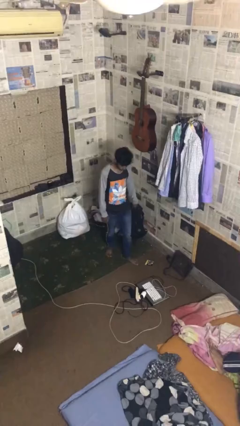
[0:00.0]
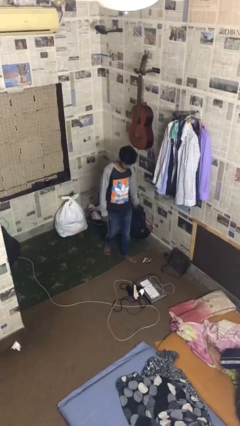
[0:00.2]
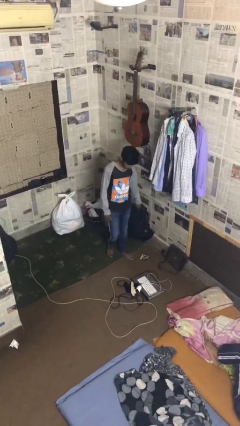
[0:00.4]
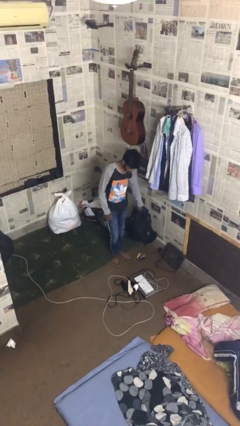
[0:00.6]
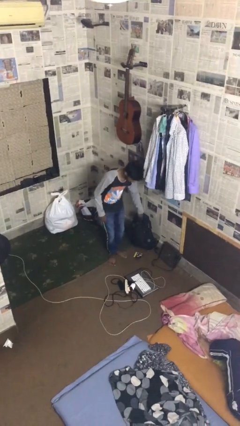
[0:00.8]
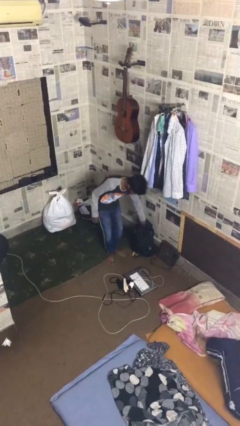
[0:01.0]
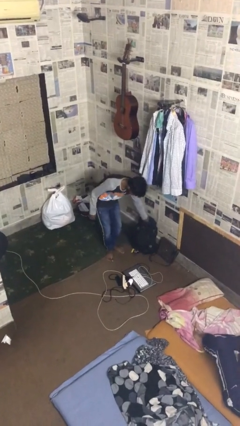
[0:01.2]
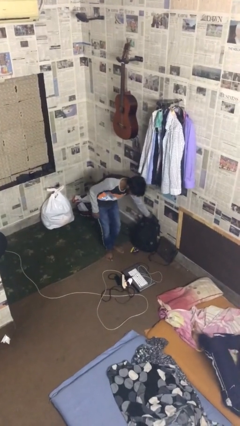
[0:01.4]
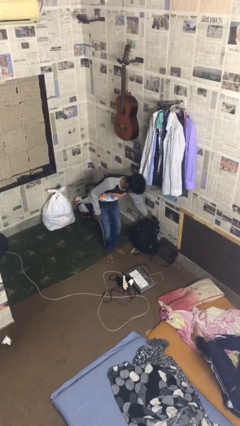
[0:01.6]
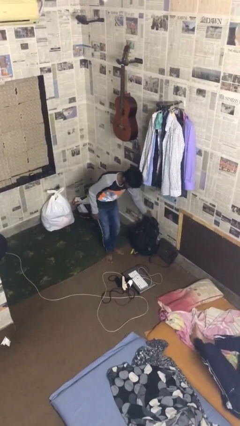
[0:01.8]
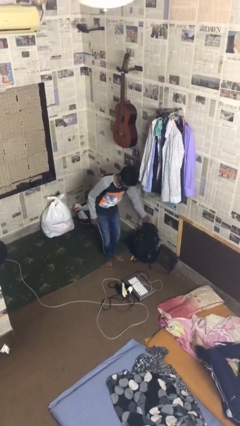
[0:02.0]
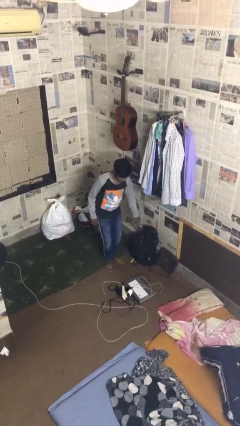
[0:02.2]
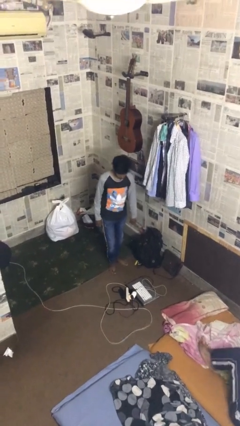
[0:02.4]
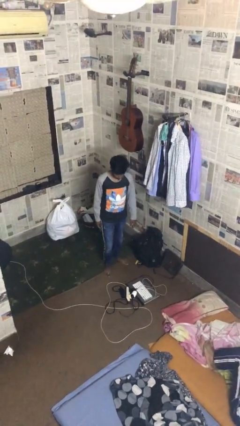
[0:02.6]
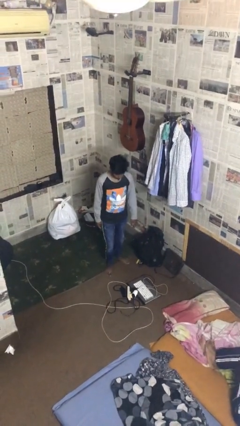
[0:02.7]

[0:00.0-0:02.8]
person puts down object on floor

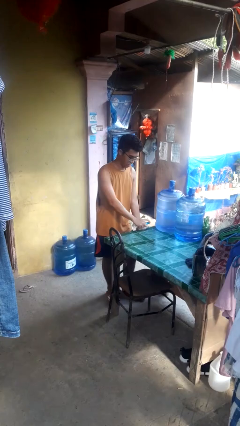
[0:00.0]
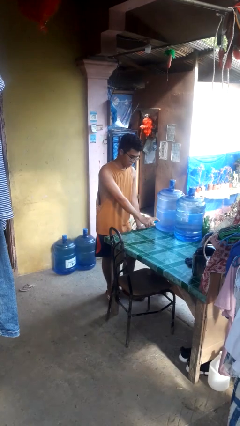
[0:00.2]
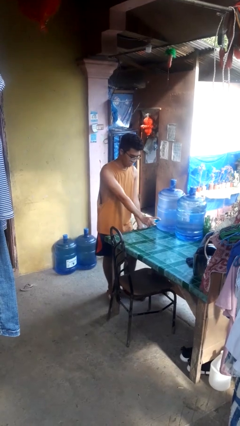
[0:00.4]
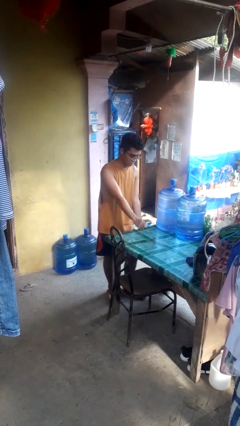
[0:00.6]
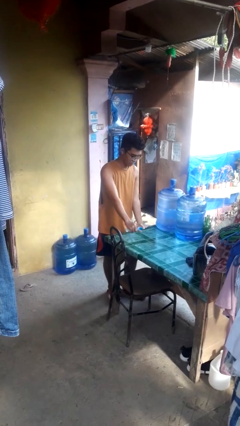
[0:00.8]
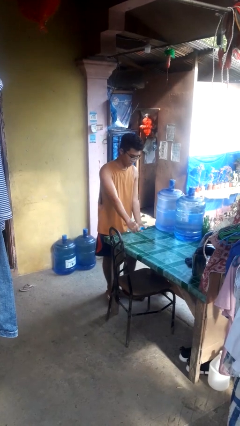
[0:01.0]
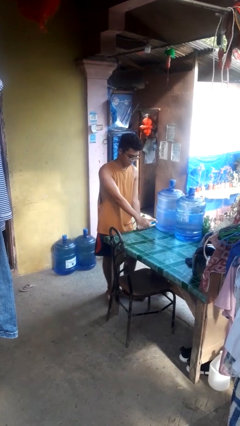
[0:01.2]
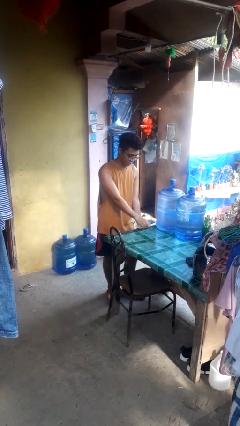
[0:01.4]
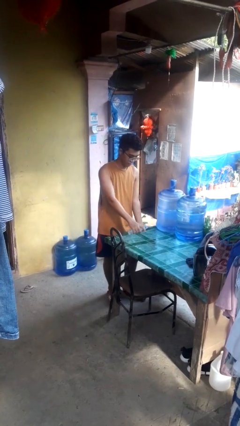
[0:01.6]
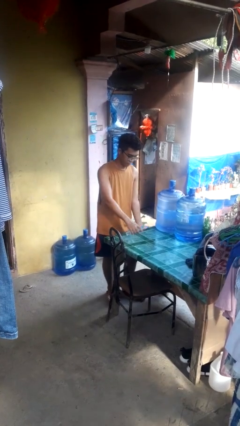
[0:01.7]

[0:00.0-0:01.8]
person sprays from bottle

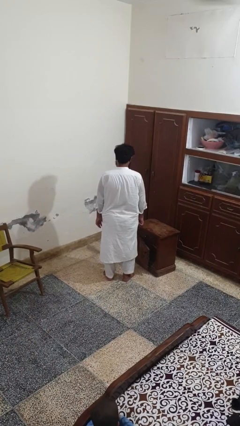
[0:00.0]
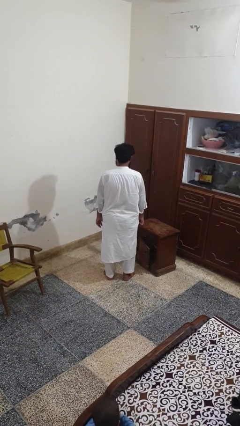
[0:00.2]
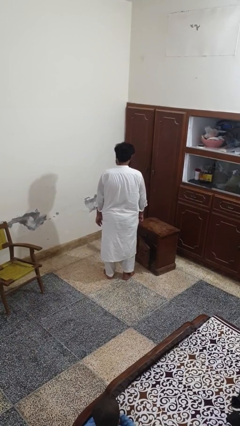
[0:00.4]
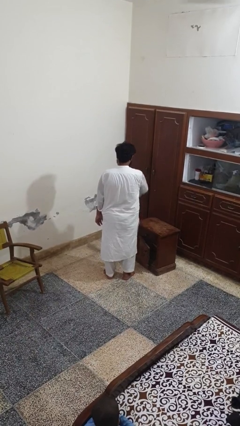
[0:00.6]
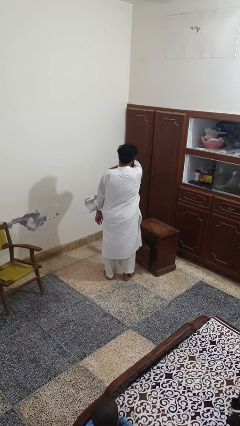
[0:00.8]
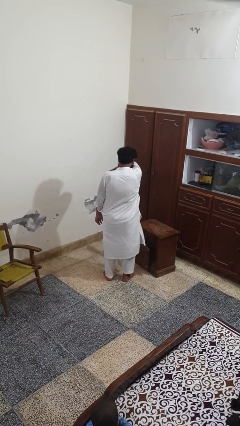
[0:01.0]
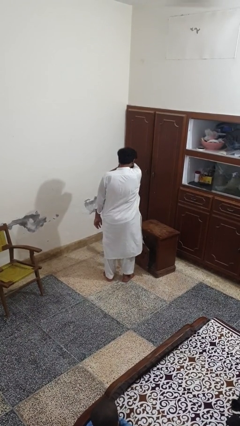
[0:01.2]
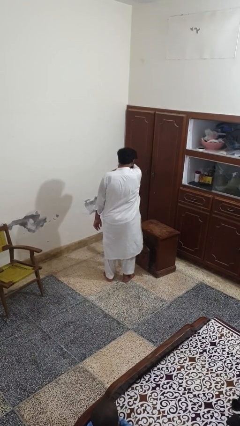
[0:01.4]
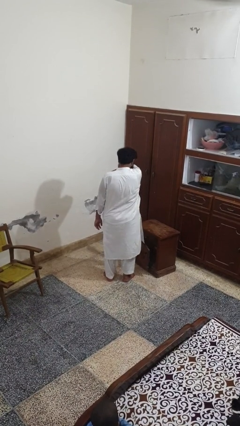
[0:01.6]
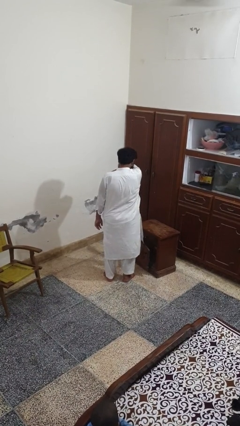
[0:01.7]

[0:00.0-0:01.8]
person sneezes into arm

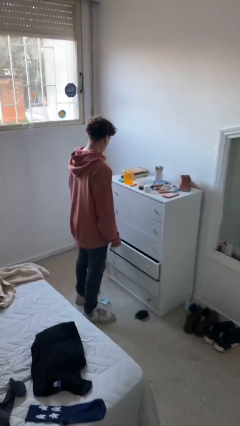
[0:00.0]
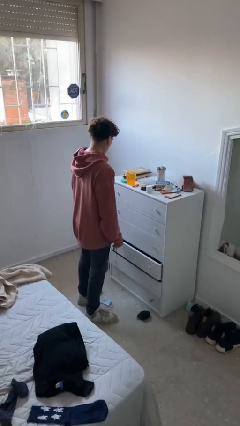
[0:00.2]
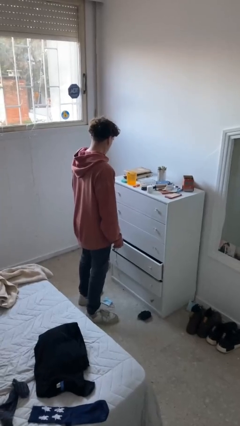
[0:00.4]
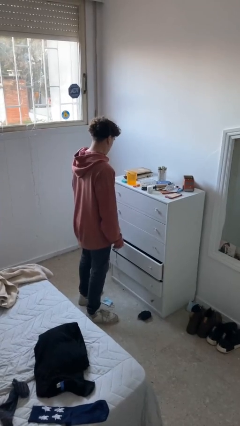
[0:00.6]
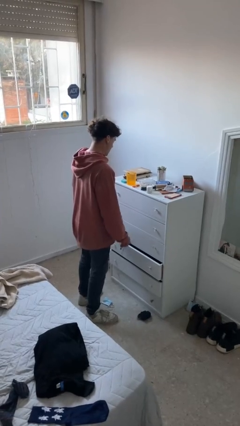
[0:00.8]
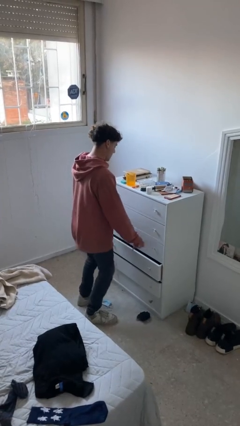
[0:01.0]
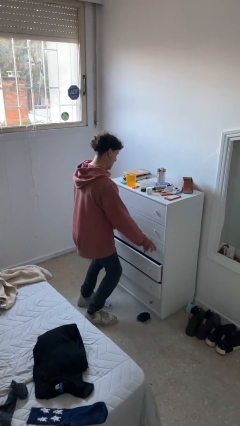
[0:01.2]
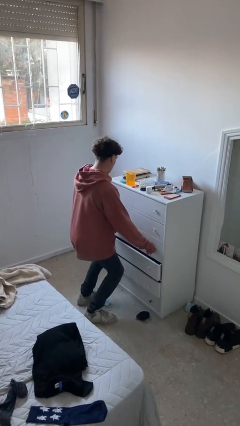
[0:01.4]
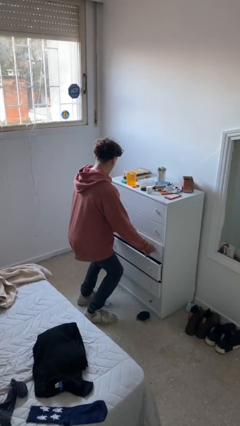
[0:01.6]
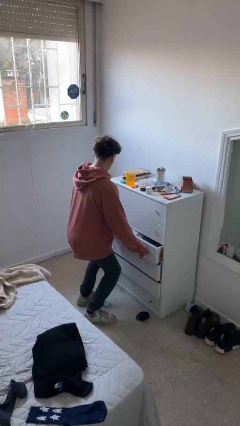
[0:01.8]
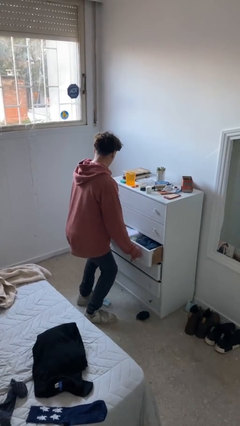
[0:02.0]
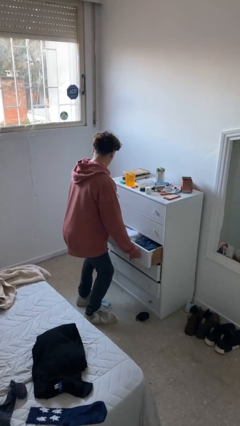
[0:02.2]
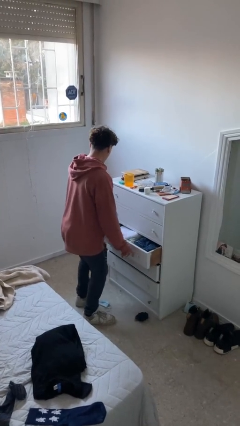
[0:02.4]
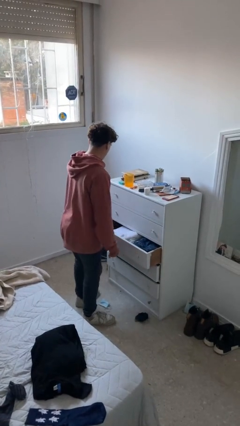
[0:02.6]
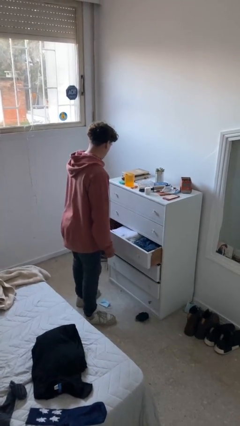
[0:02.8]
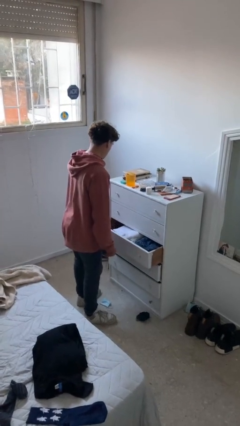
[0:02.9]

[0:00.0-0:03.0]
person opens dresser drawer

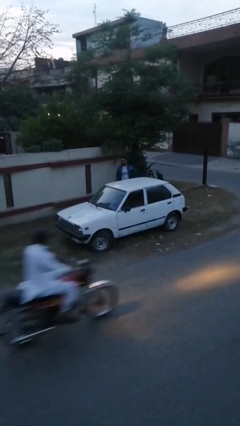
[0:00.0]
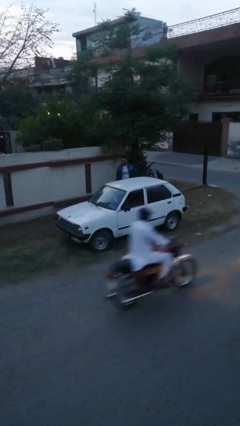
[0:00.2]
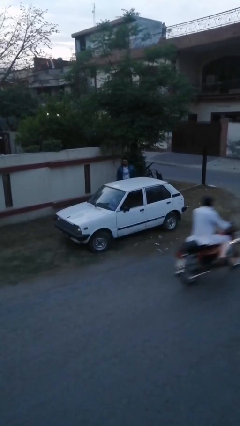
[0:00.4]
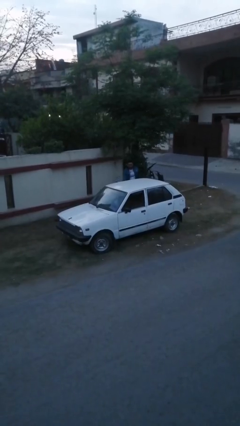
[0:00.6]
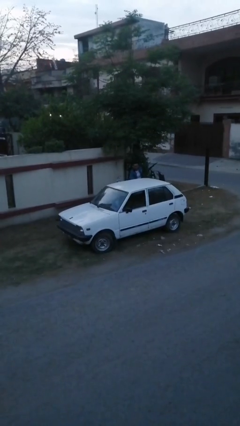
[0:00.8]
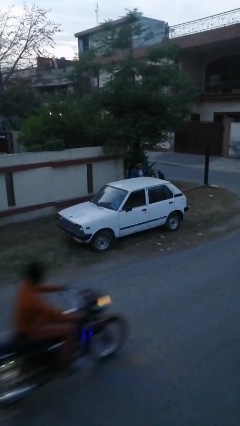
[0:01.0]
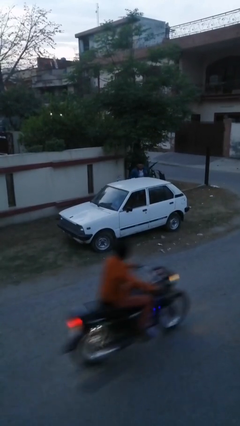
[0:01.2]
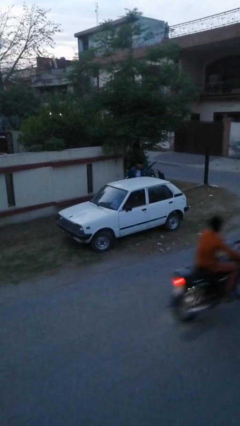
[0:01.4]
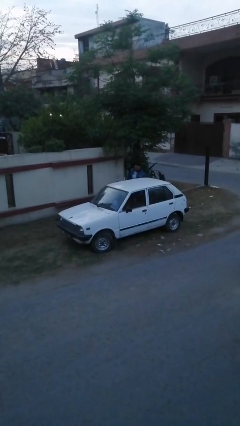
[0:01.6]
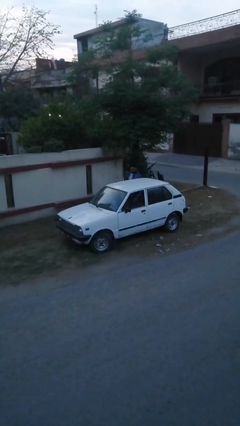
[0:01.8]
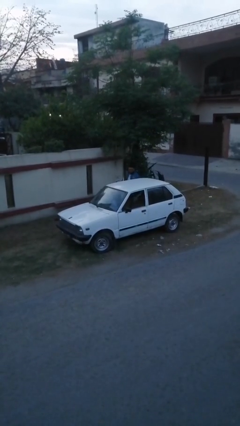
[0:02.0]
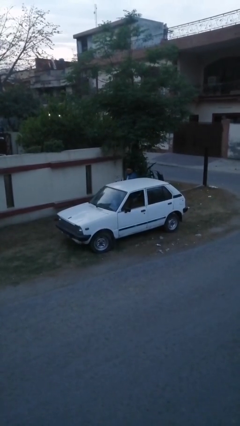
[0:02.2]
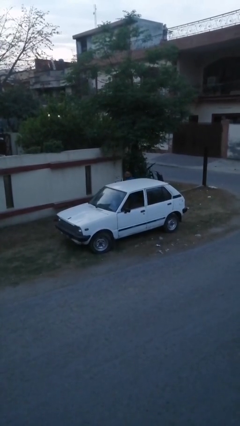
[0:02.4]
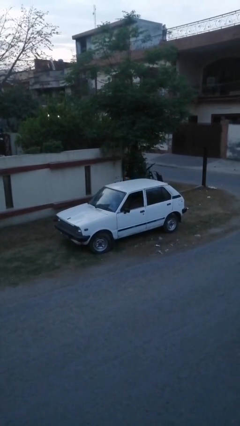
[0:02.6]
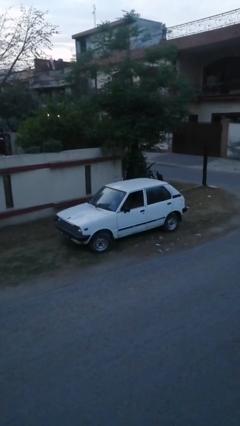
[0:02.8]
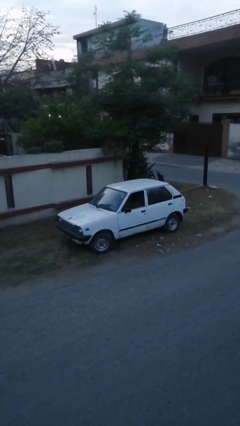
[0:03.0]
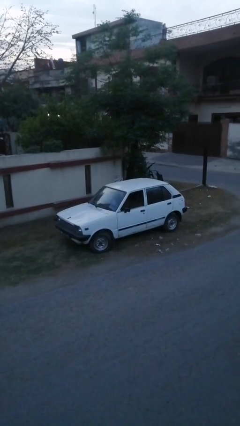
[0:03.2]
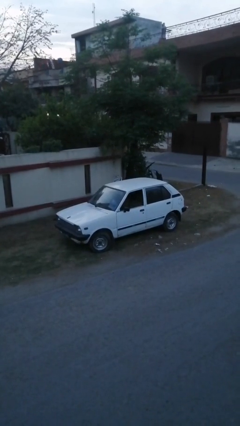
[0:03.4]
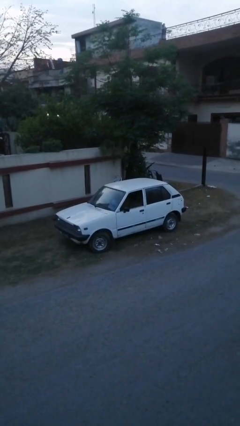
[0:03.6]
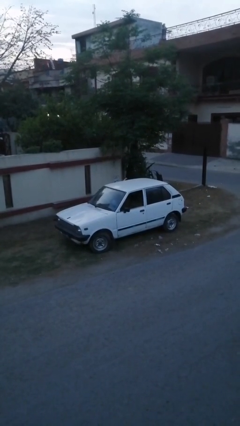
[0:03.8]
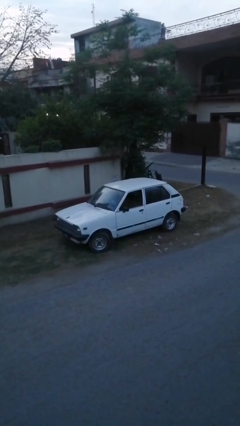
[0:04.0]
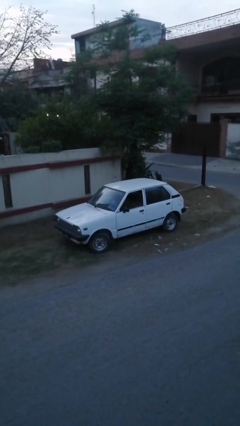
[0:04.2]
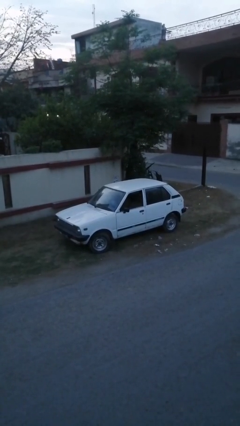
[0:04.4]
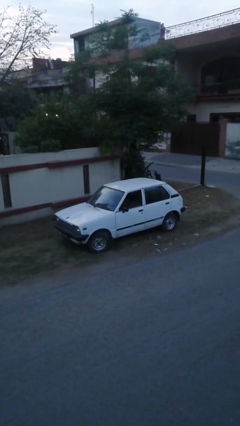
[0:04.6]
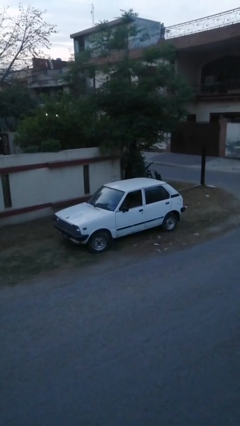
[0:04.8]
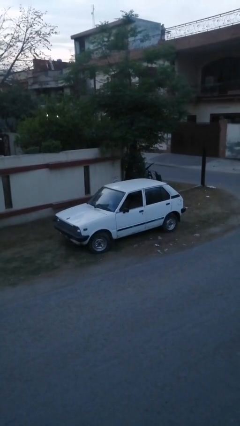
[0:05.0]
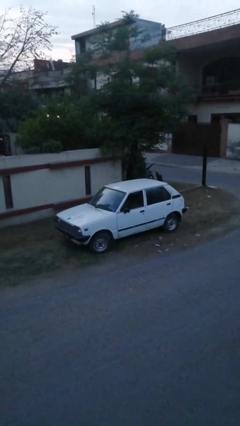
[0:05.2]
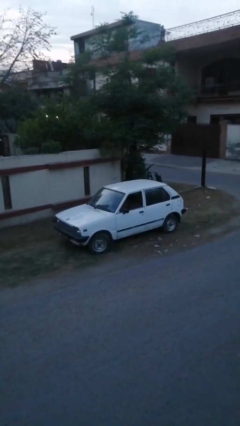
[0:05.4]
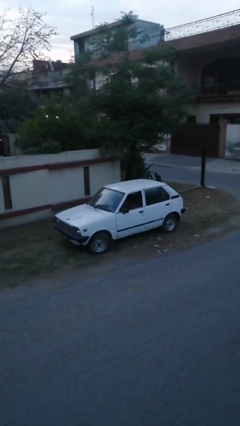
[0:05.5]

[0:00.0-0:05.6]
car picks up person

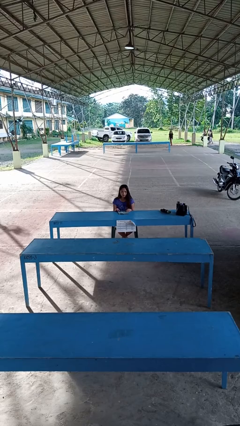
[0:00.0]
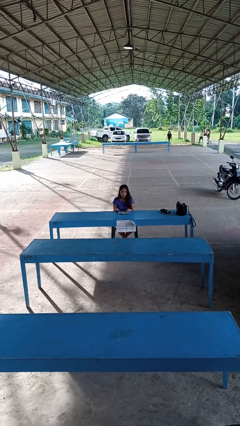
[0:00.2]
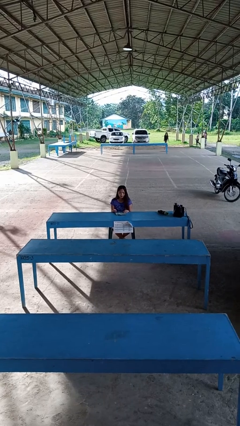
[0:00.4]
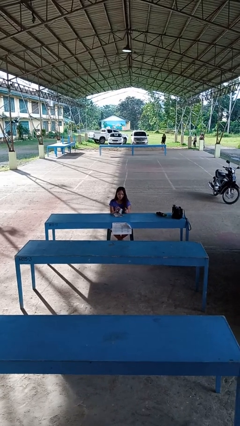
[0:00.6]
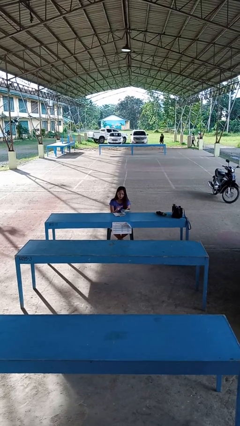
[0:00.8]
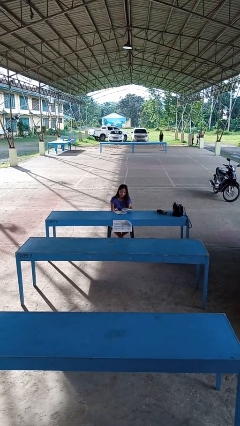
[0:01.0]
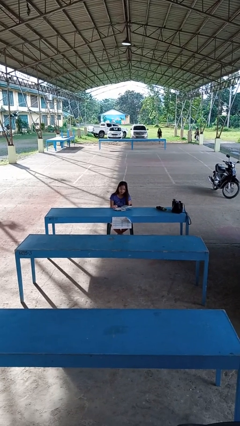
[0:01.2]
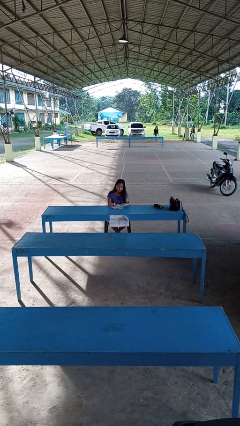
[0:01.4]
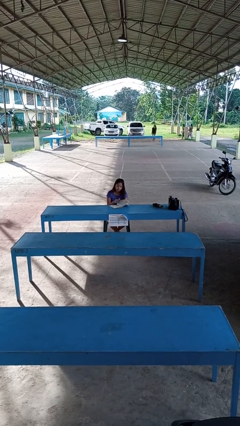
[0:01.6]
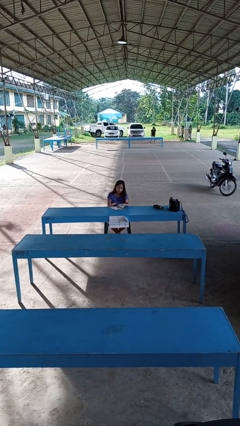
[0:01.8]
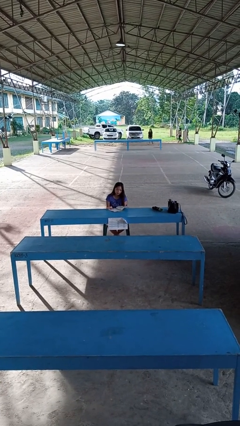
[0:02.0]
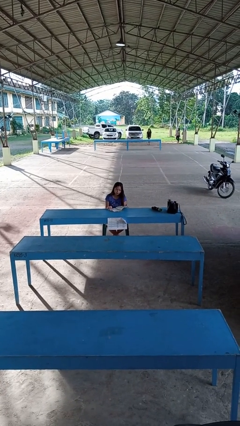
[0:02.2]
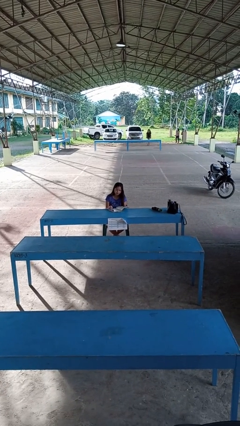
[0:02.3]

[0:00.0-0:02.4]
person reads magazine
